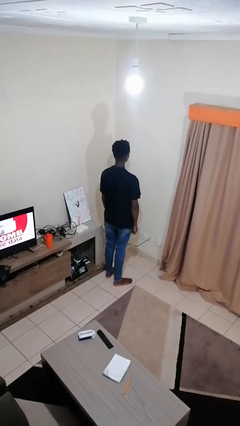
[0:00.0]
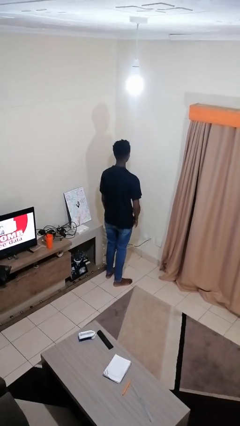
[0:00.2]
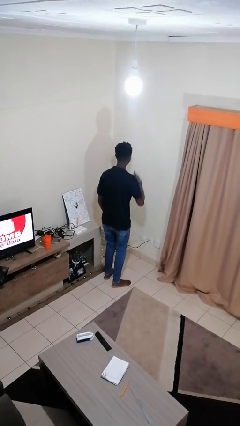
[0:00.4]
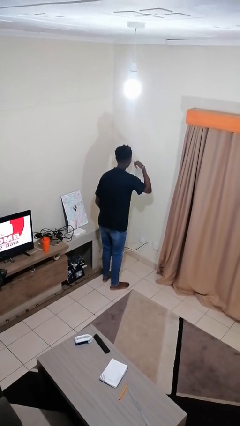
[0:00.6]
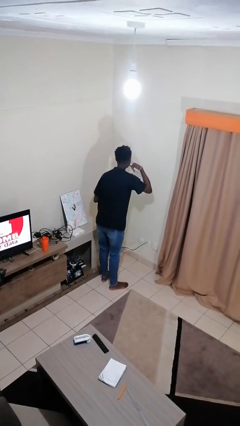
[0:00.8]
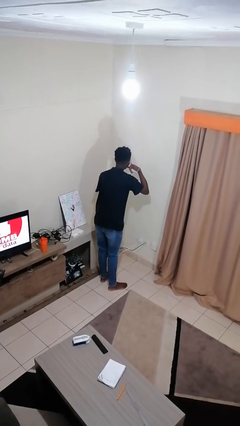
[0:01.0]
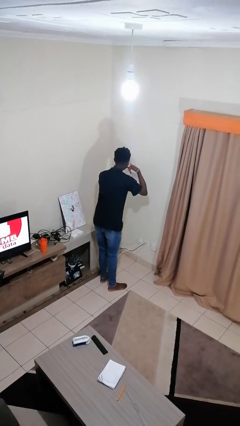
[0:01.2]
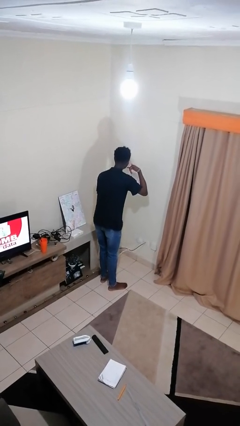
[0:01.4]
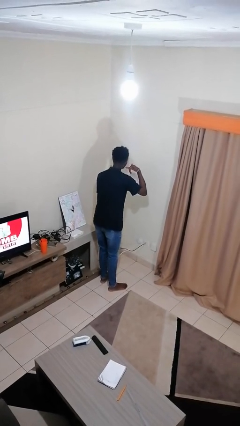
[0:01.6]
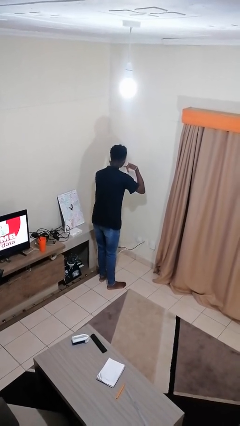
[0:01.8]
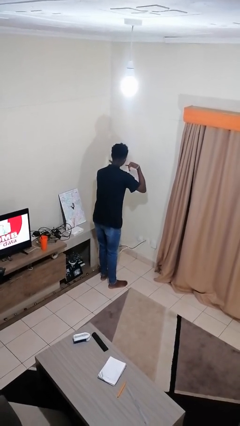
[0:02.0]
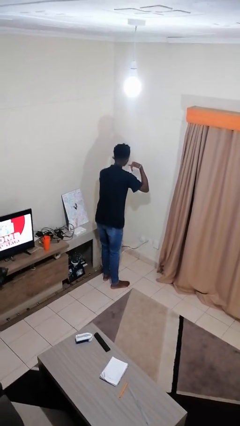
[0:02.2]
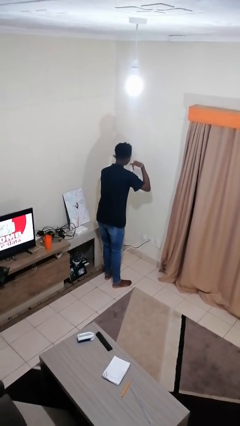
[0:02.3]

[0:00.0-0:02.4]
person gestures call me

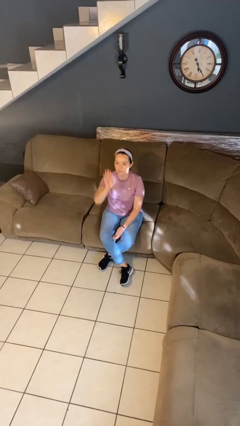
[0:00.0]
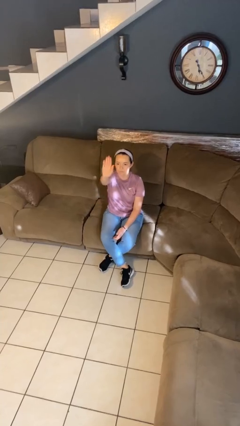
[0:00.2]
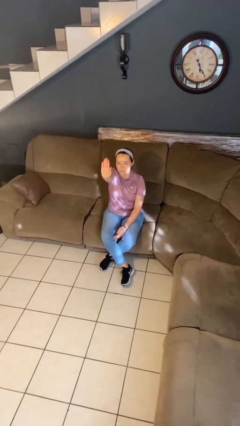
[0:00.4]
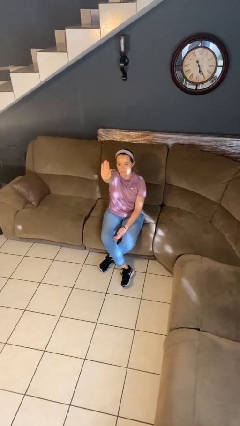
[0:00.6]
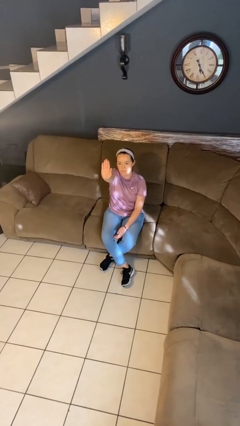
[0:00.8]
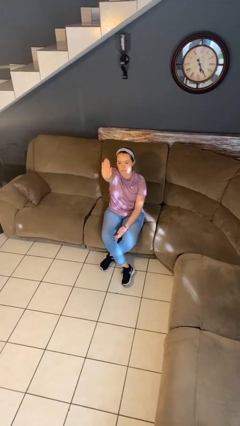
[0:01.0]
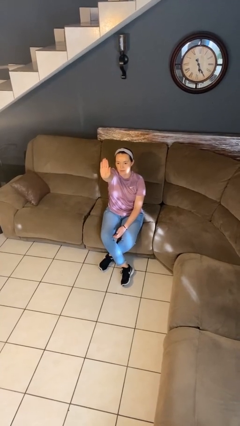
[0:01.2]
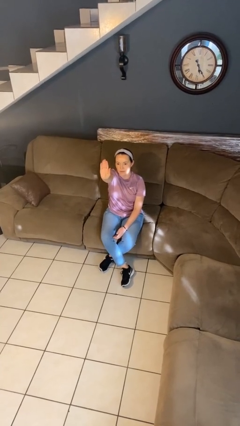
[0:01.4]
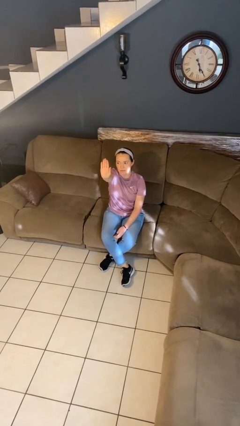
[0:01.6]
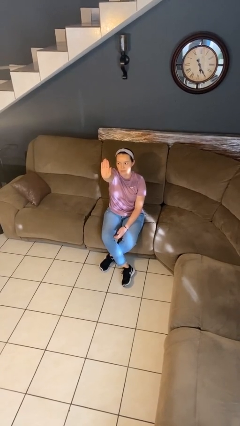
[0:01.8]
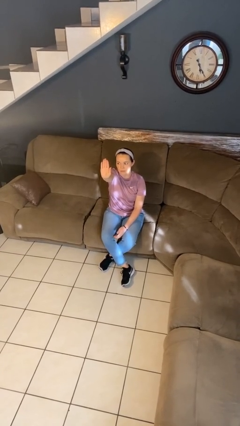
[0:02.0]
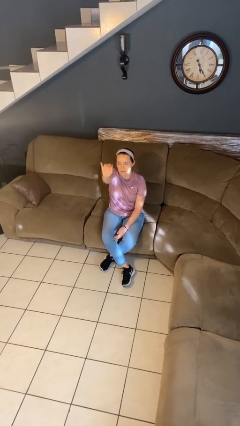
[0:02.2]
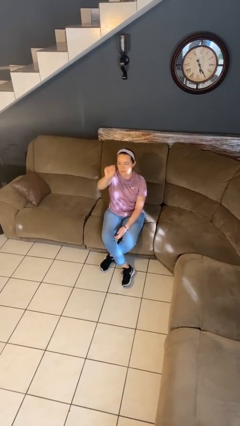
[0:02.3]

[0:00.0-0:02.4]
person gestures stop

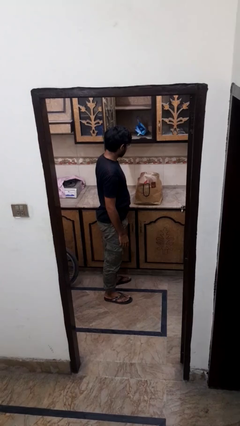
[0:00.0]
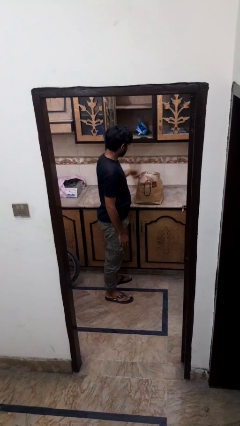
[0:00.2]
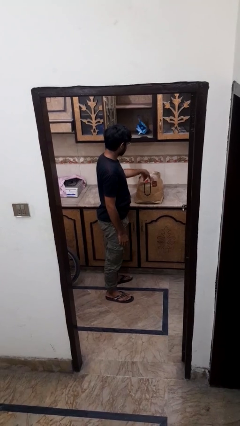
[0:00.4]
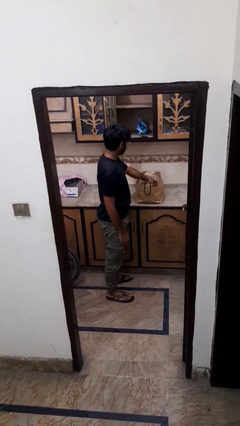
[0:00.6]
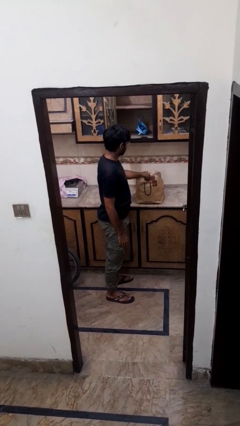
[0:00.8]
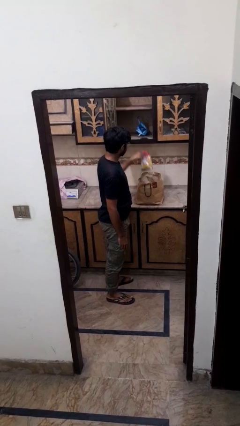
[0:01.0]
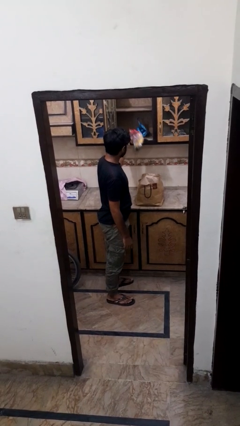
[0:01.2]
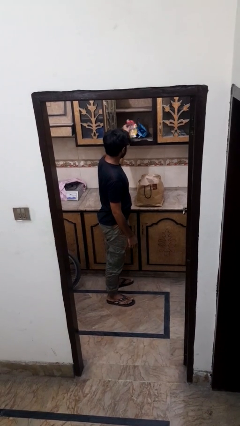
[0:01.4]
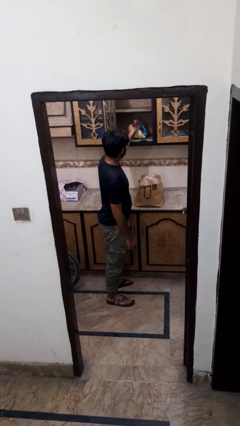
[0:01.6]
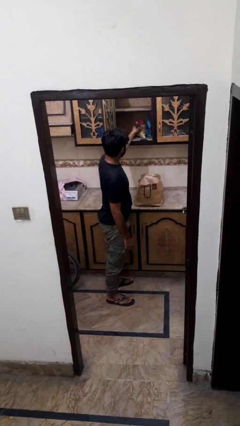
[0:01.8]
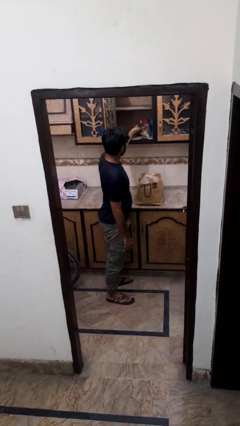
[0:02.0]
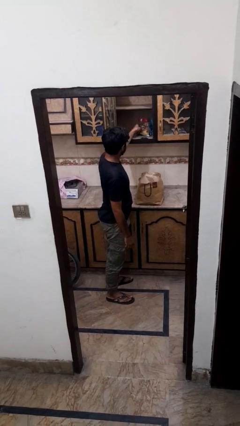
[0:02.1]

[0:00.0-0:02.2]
person loads groceries into cabinet

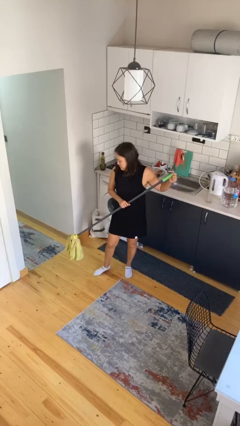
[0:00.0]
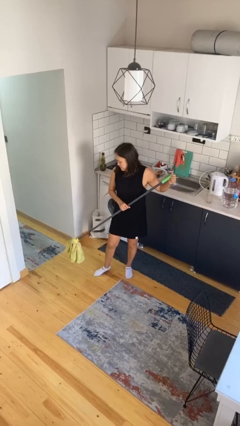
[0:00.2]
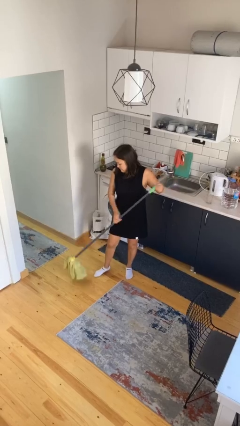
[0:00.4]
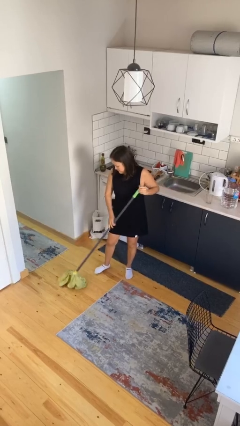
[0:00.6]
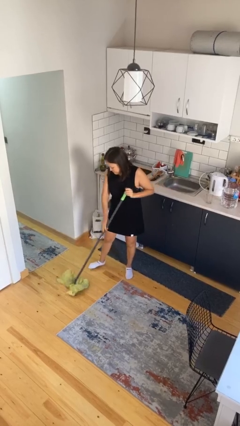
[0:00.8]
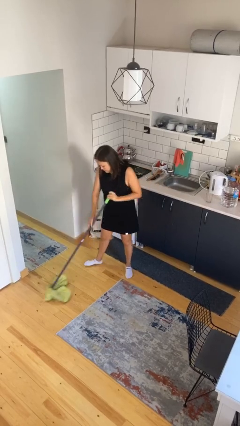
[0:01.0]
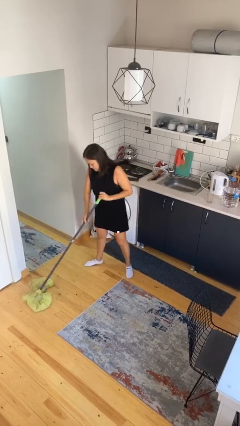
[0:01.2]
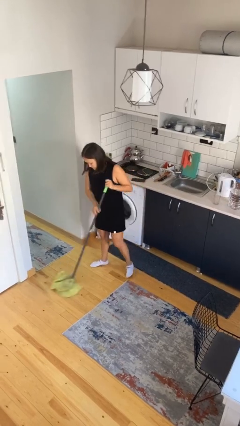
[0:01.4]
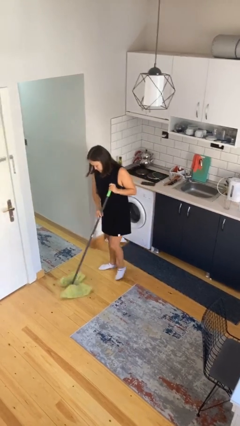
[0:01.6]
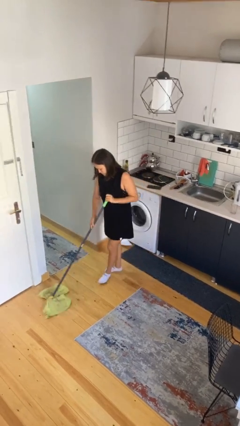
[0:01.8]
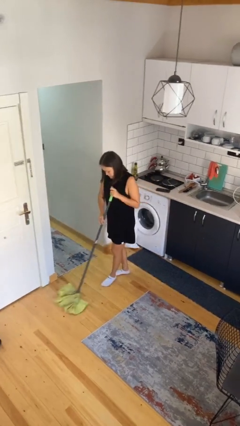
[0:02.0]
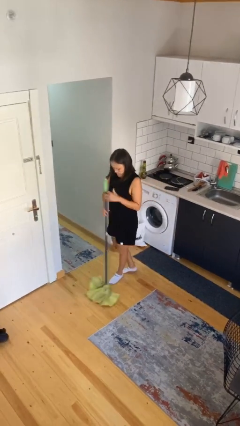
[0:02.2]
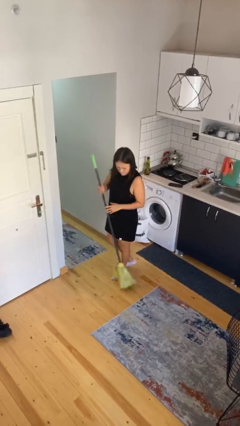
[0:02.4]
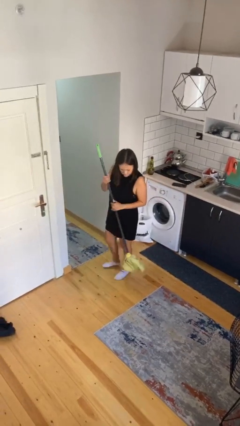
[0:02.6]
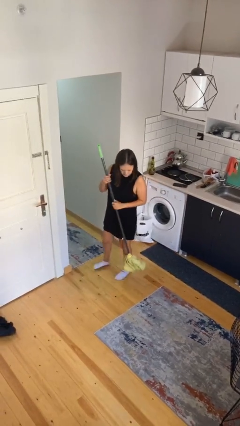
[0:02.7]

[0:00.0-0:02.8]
person sweeps floor

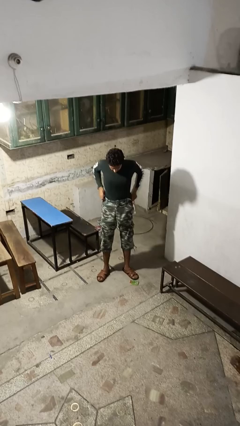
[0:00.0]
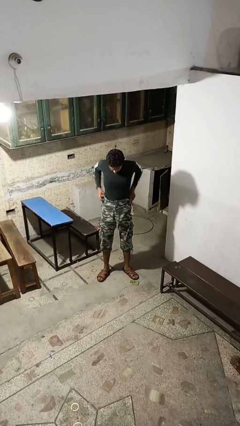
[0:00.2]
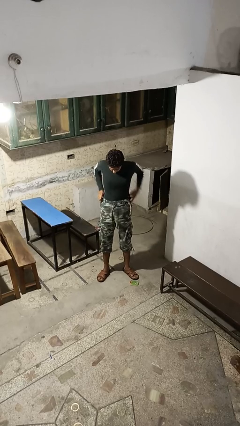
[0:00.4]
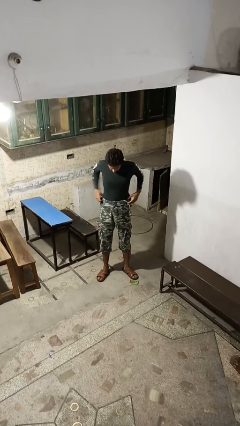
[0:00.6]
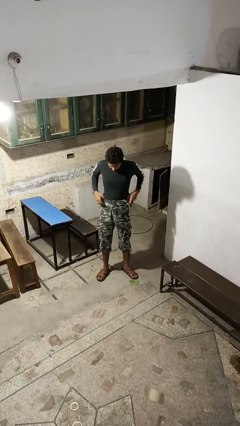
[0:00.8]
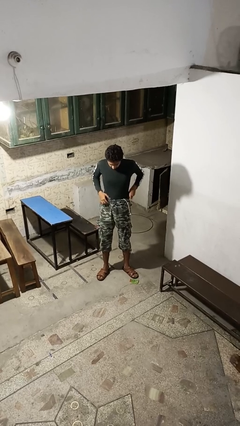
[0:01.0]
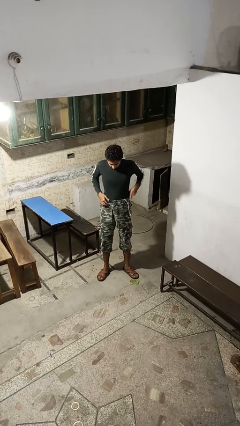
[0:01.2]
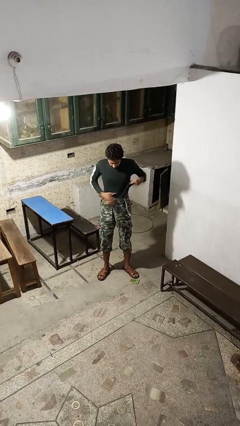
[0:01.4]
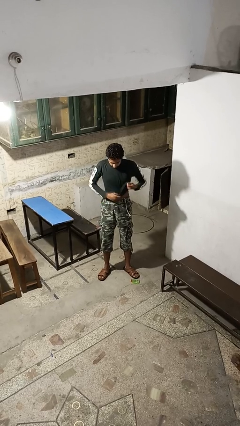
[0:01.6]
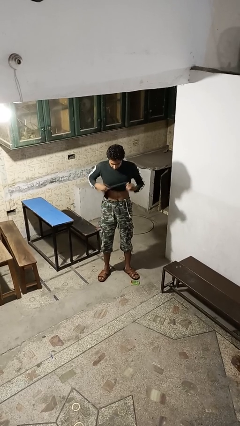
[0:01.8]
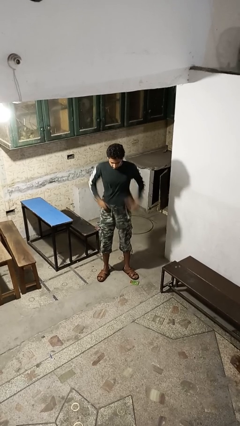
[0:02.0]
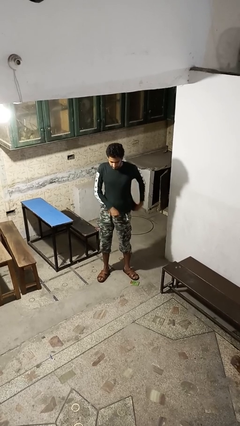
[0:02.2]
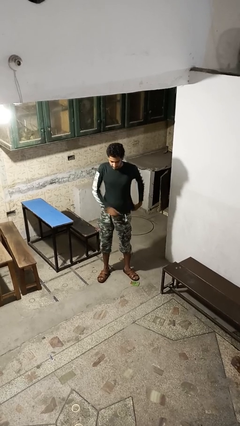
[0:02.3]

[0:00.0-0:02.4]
person untucks shirt

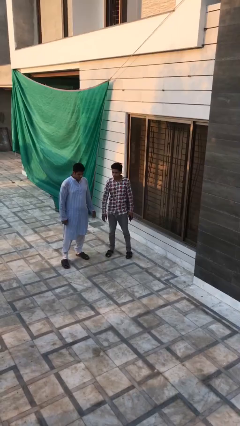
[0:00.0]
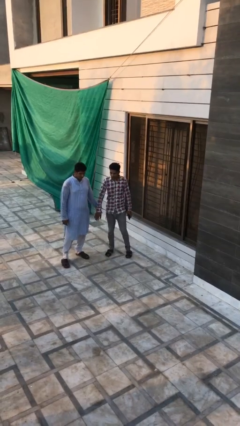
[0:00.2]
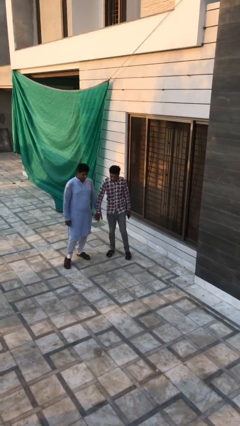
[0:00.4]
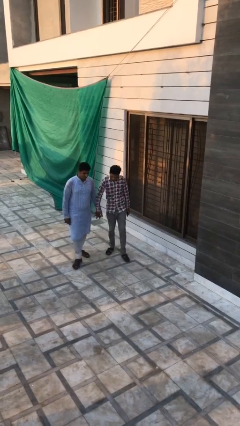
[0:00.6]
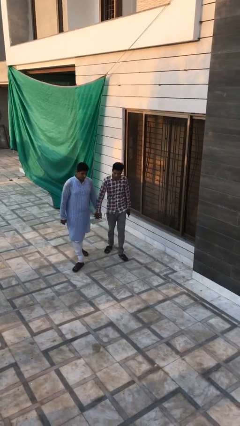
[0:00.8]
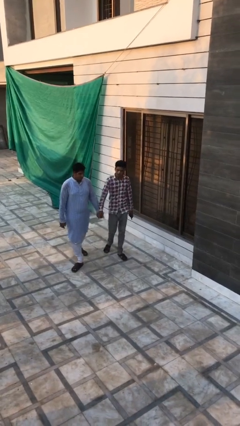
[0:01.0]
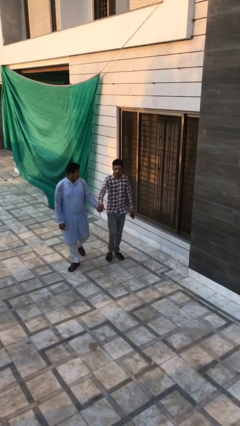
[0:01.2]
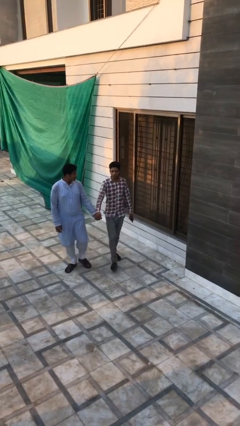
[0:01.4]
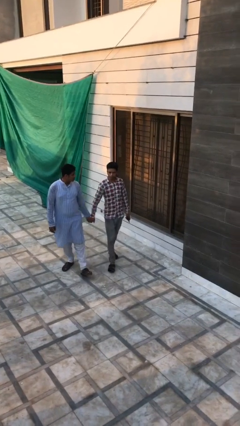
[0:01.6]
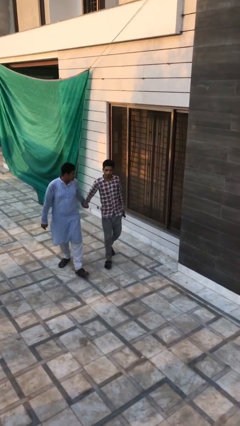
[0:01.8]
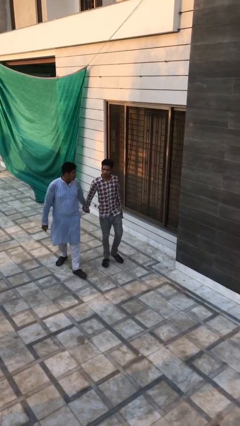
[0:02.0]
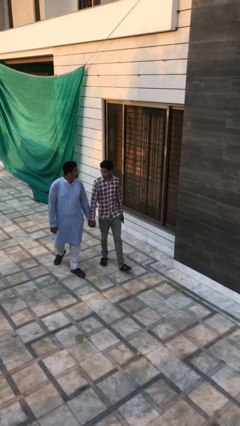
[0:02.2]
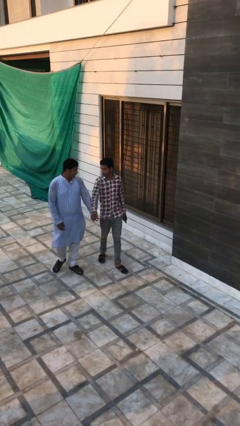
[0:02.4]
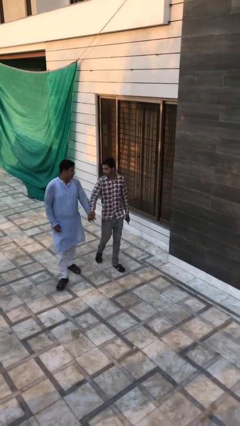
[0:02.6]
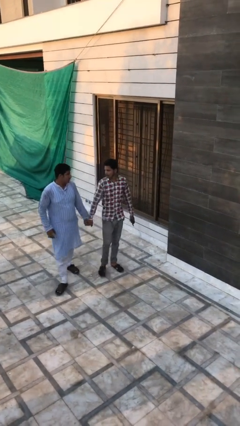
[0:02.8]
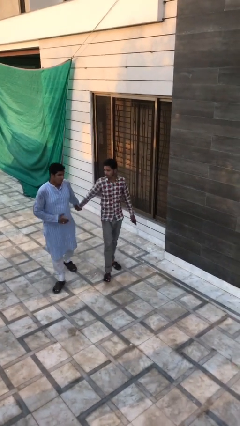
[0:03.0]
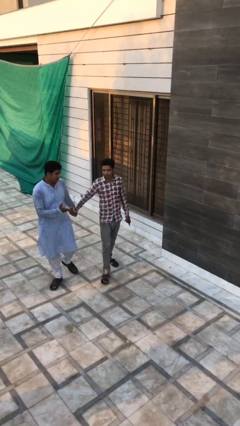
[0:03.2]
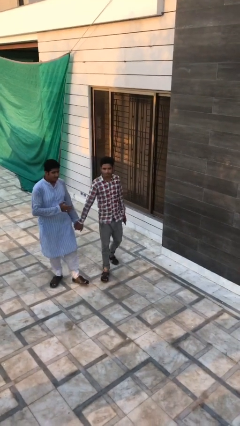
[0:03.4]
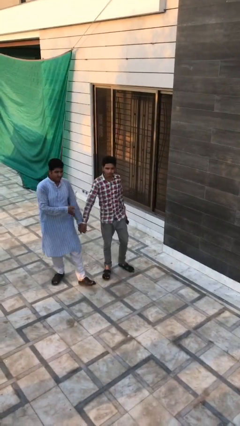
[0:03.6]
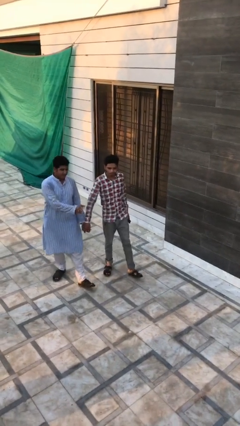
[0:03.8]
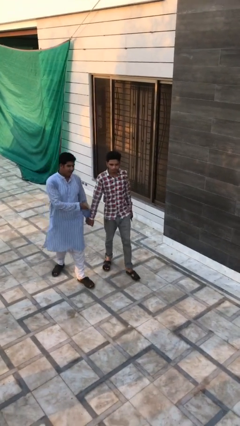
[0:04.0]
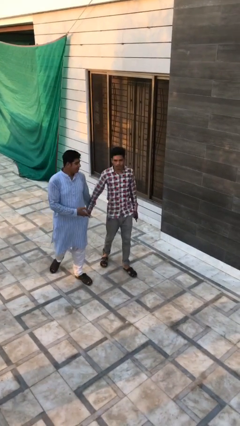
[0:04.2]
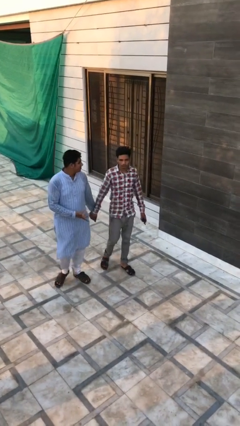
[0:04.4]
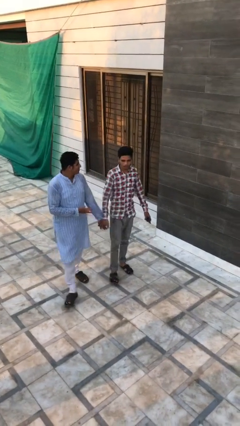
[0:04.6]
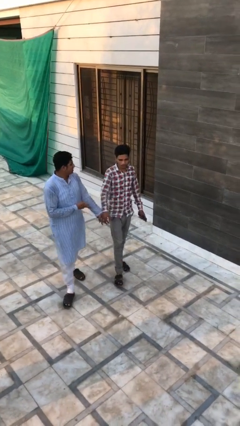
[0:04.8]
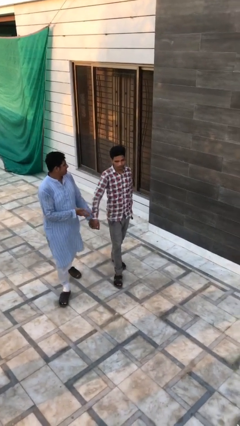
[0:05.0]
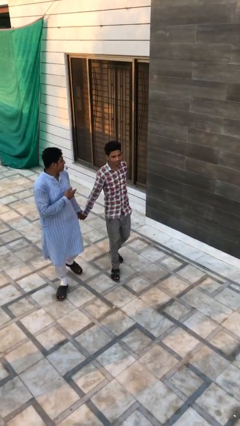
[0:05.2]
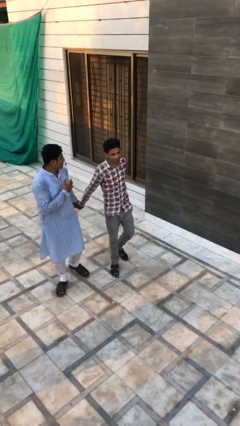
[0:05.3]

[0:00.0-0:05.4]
person holds hand
